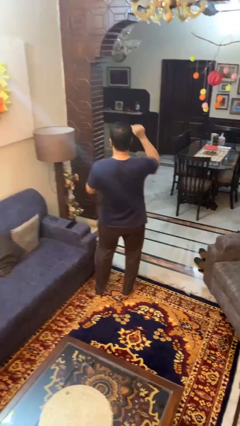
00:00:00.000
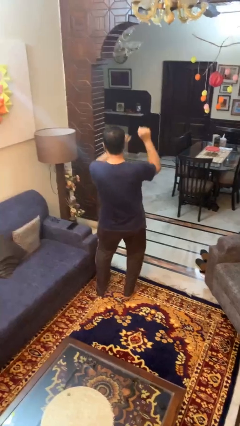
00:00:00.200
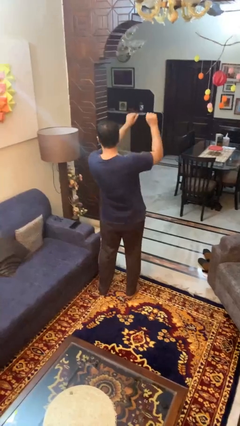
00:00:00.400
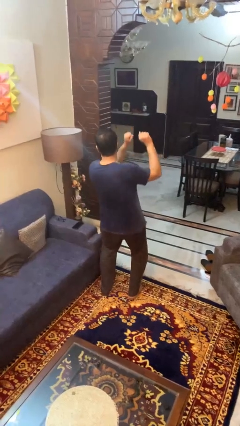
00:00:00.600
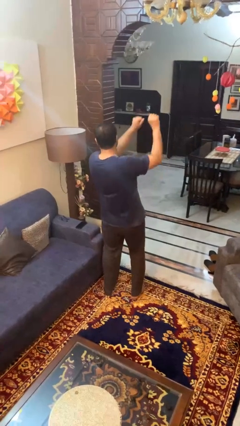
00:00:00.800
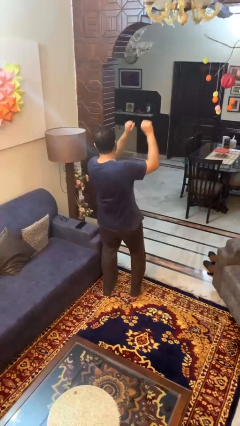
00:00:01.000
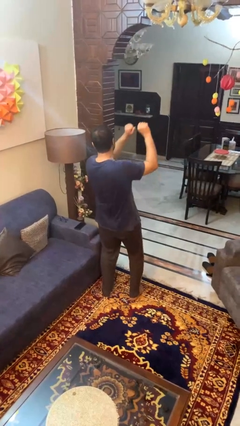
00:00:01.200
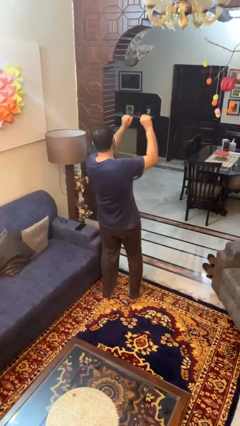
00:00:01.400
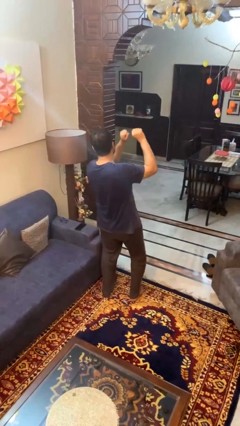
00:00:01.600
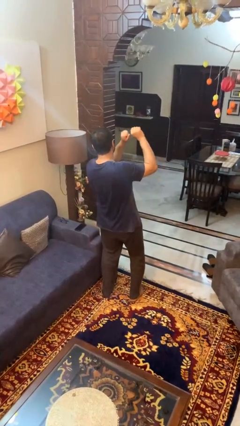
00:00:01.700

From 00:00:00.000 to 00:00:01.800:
person dances in place

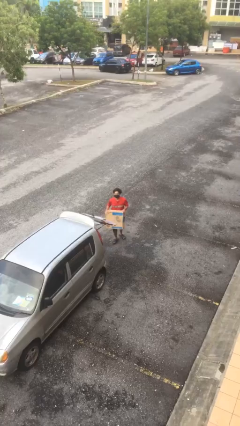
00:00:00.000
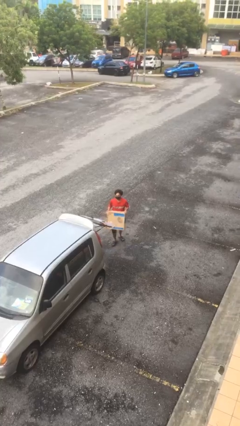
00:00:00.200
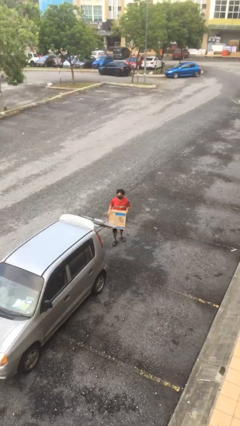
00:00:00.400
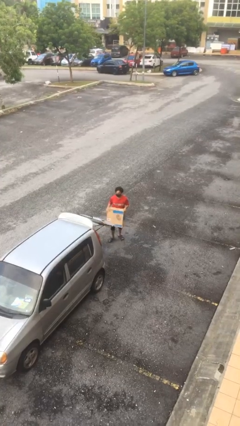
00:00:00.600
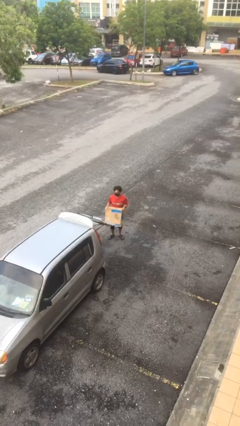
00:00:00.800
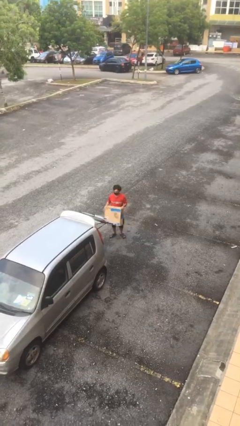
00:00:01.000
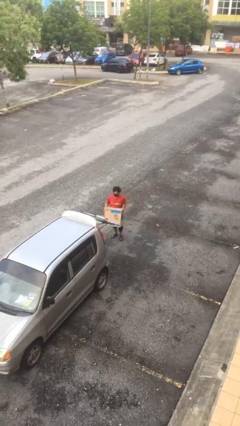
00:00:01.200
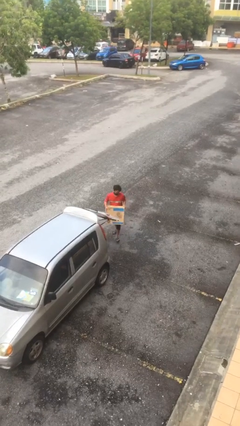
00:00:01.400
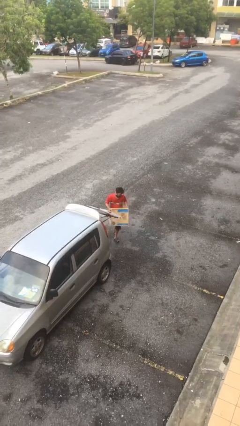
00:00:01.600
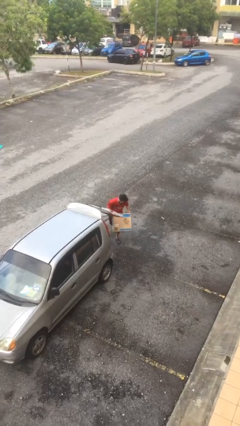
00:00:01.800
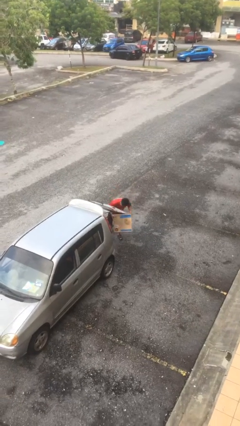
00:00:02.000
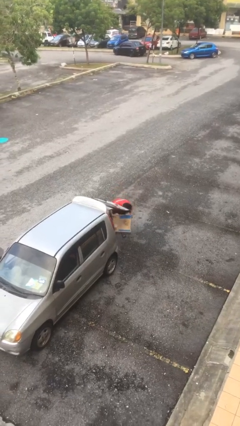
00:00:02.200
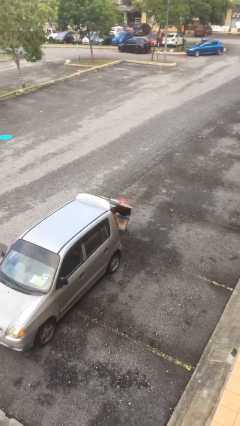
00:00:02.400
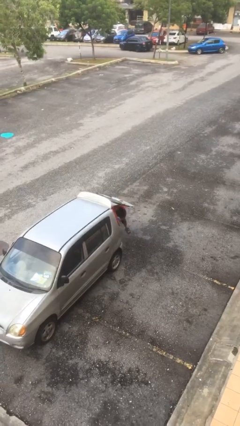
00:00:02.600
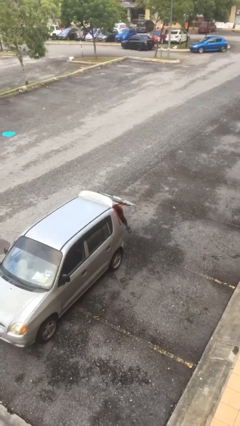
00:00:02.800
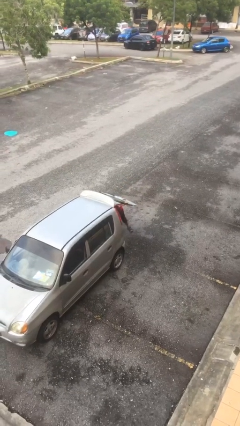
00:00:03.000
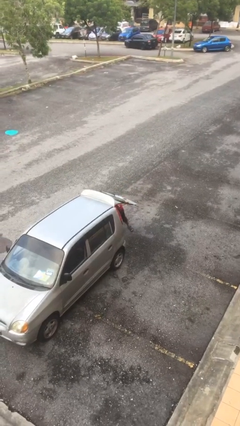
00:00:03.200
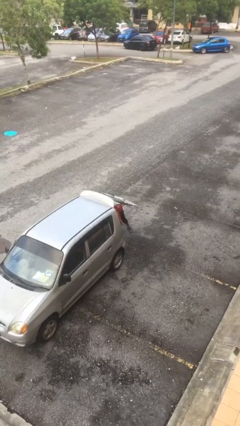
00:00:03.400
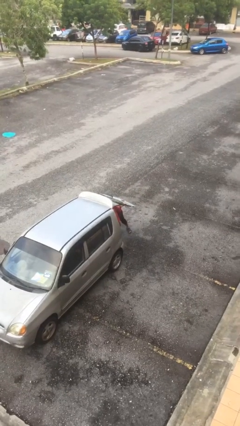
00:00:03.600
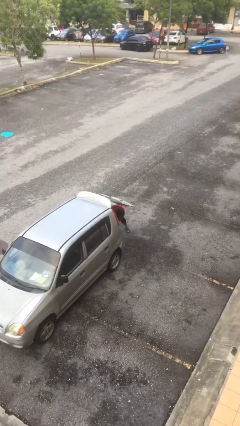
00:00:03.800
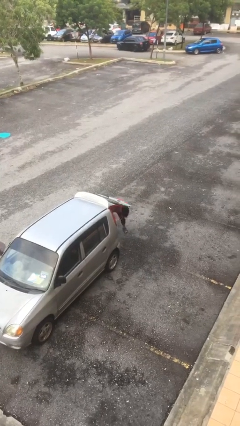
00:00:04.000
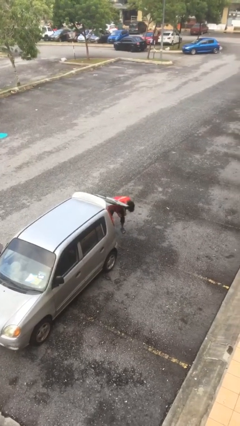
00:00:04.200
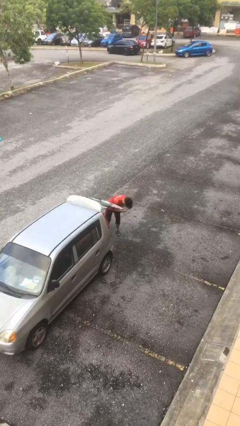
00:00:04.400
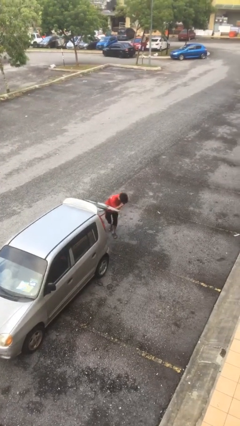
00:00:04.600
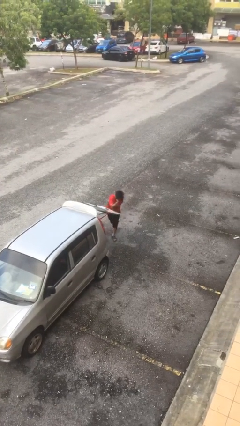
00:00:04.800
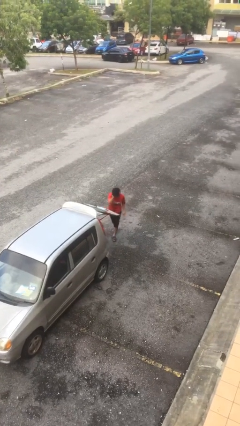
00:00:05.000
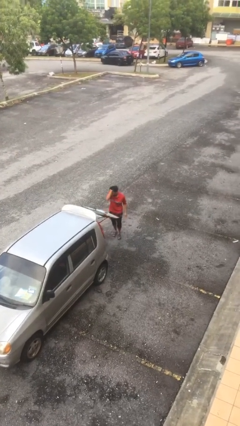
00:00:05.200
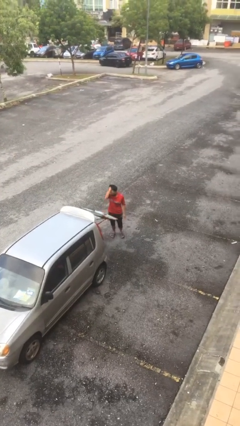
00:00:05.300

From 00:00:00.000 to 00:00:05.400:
person loads car

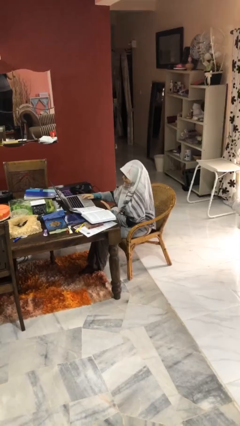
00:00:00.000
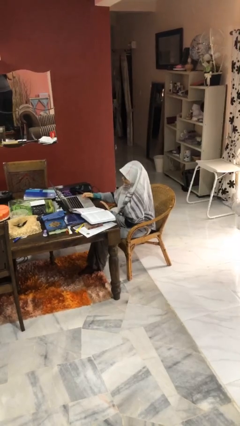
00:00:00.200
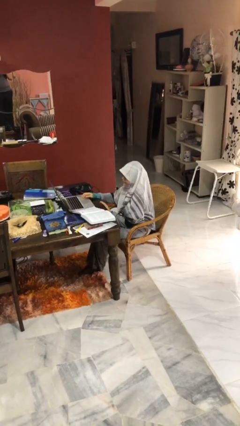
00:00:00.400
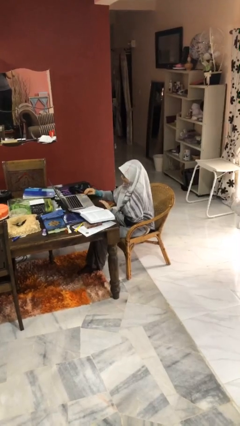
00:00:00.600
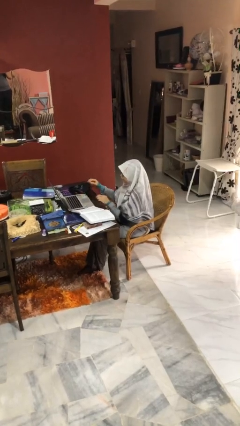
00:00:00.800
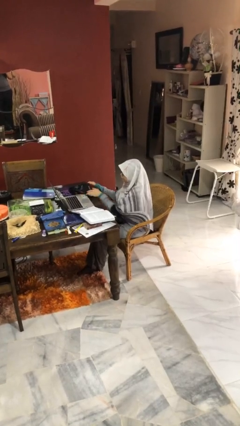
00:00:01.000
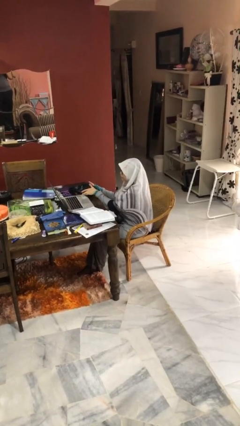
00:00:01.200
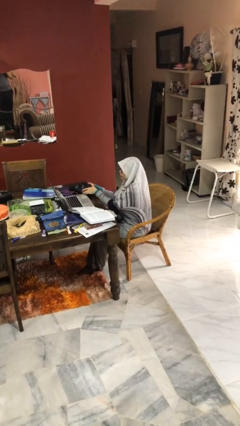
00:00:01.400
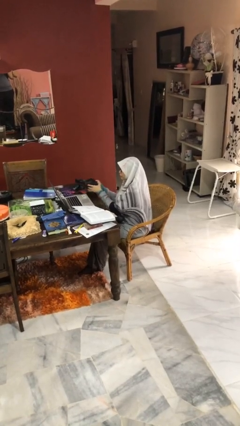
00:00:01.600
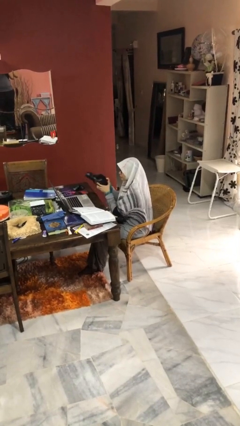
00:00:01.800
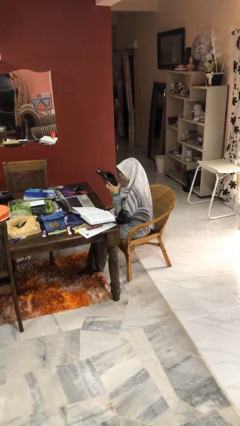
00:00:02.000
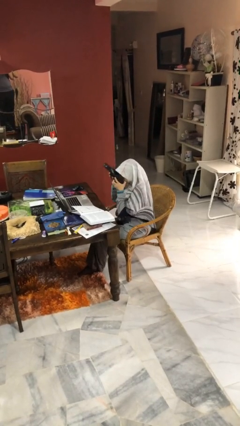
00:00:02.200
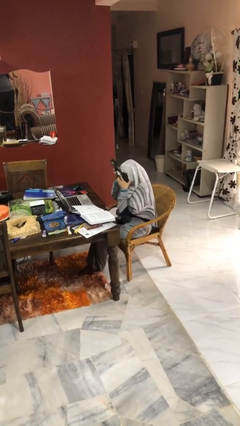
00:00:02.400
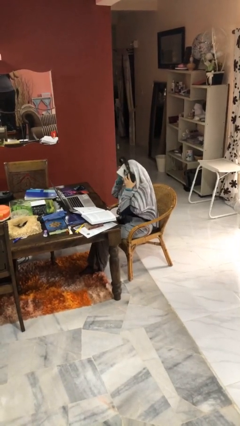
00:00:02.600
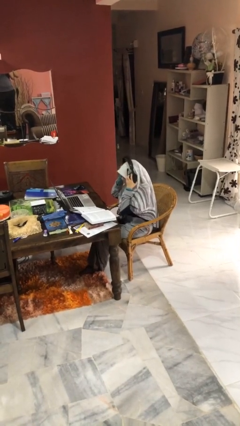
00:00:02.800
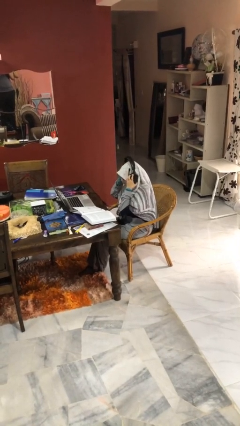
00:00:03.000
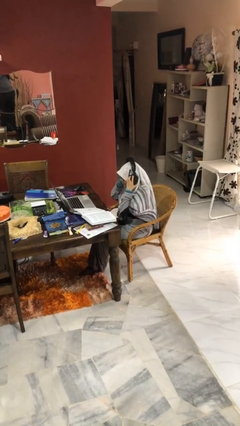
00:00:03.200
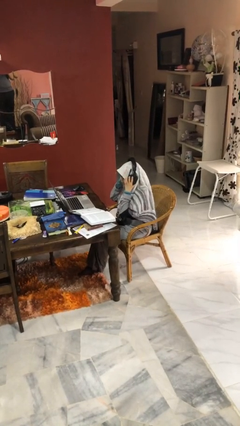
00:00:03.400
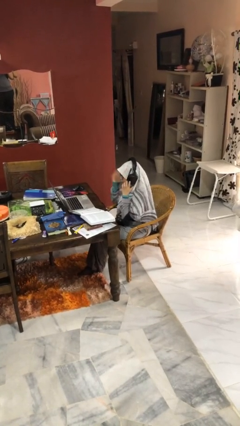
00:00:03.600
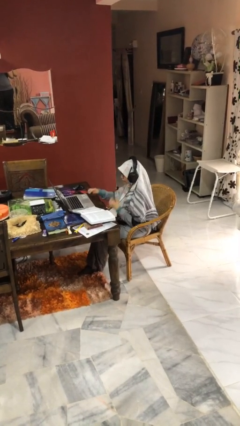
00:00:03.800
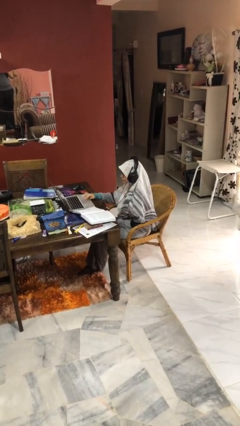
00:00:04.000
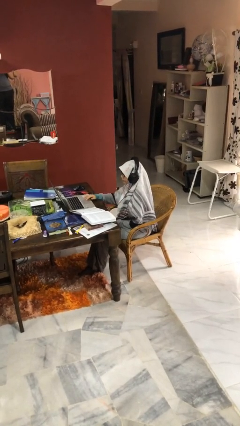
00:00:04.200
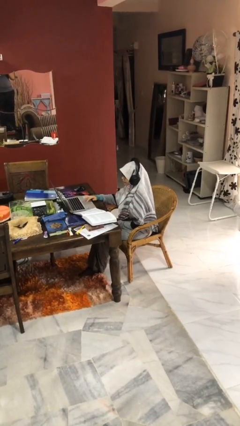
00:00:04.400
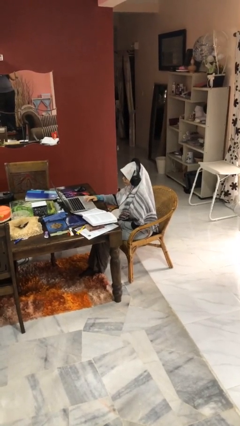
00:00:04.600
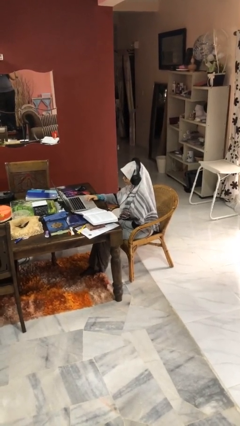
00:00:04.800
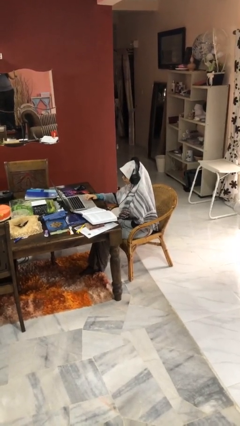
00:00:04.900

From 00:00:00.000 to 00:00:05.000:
person puts on headphones

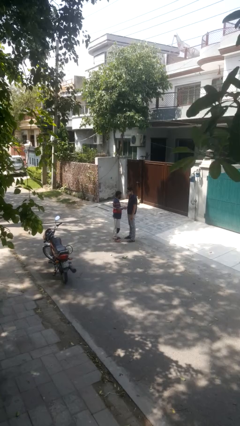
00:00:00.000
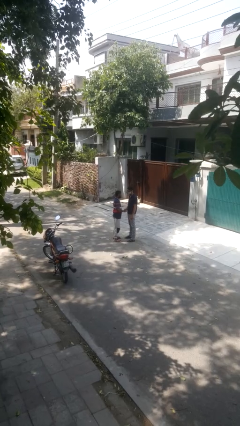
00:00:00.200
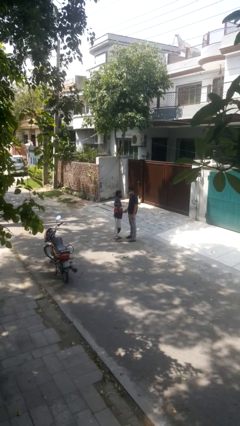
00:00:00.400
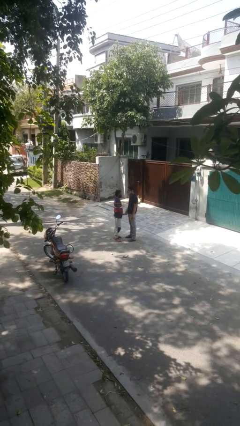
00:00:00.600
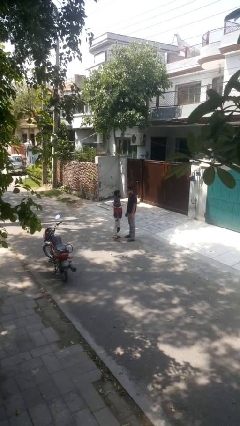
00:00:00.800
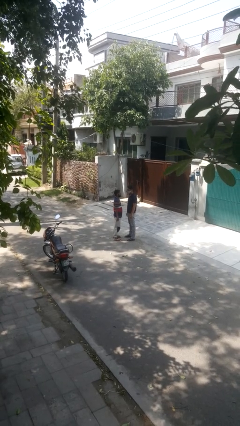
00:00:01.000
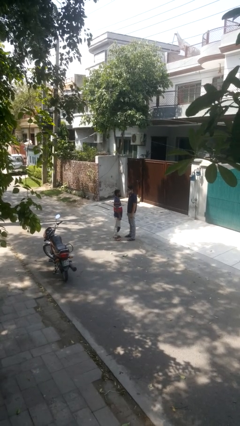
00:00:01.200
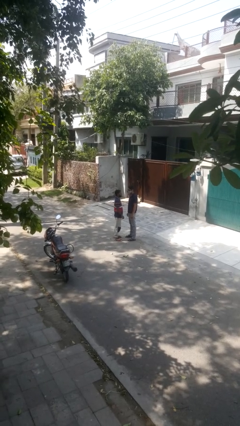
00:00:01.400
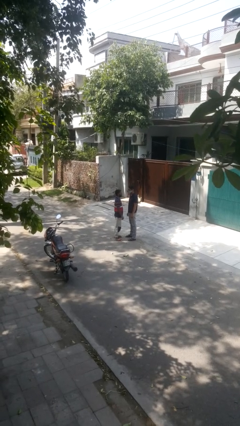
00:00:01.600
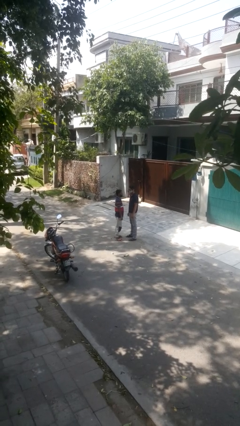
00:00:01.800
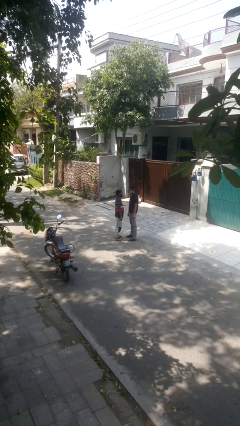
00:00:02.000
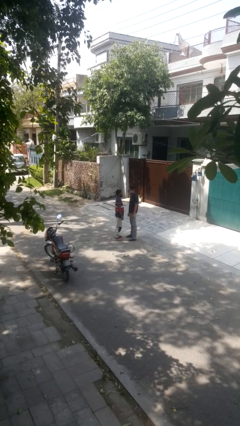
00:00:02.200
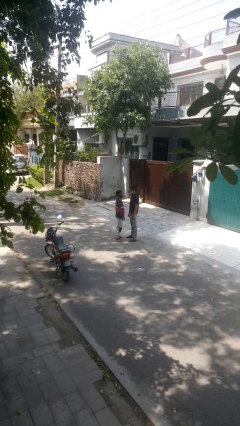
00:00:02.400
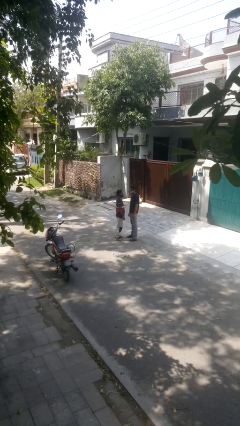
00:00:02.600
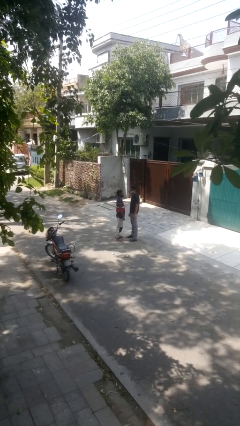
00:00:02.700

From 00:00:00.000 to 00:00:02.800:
person highfives hand

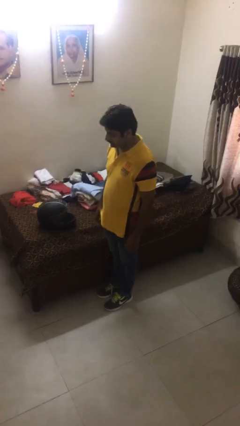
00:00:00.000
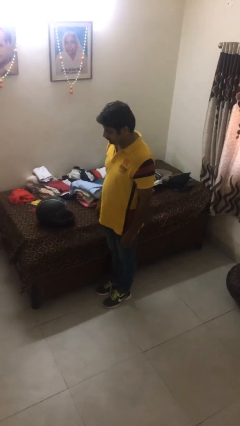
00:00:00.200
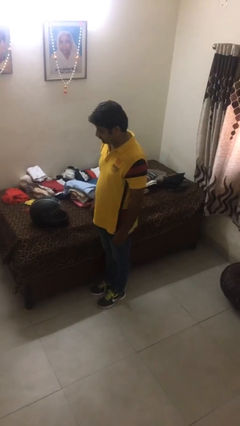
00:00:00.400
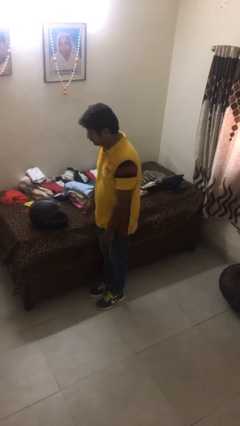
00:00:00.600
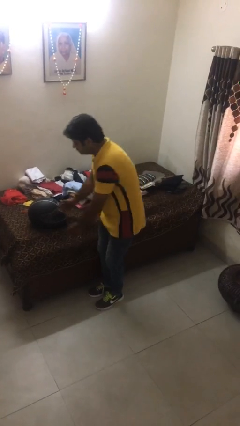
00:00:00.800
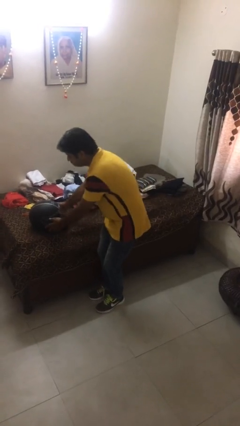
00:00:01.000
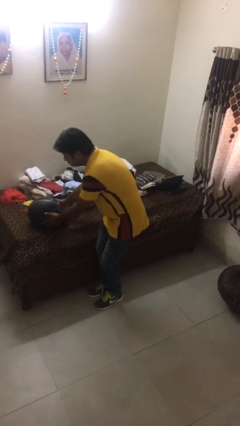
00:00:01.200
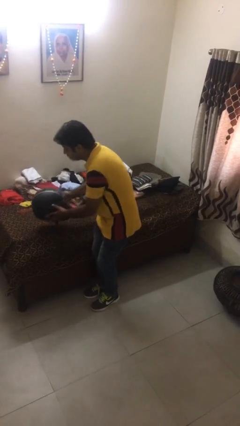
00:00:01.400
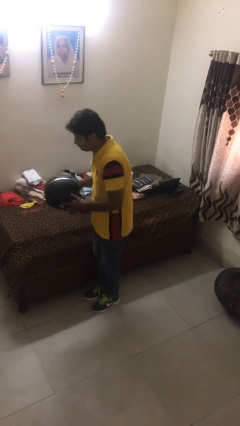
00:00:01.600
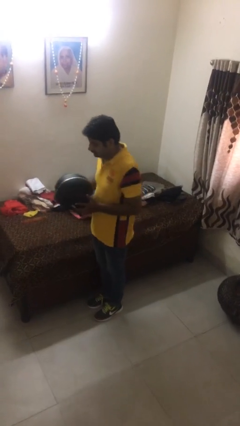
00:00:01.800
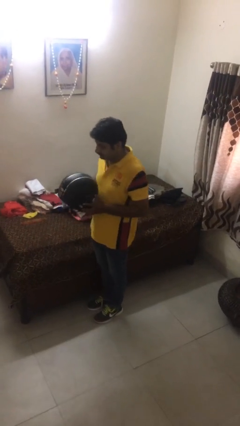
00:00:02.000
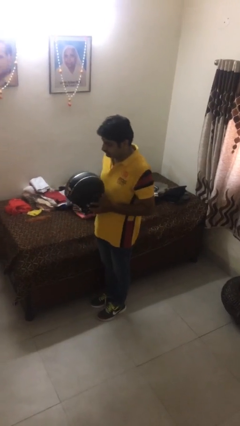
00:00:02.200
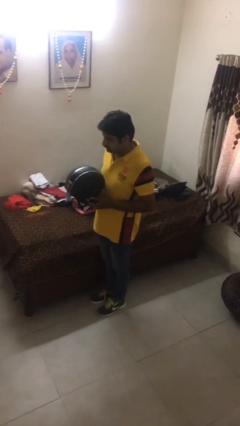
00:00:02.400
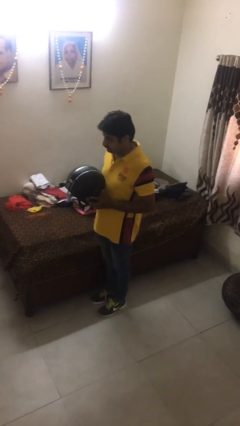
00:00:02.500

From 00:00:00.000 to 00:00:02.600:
person picks up object from bed

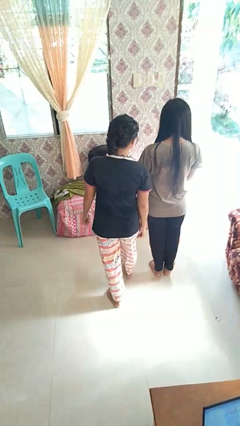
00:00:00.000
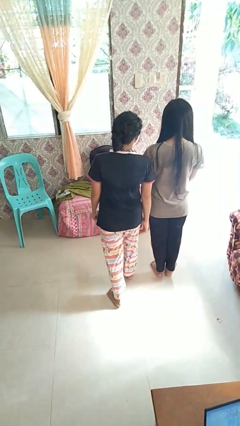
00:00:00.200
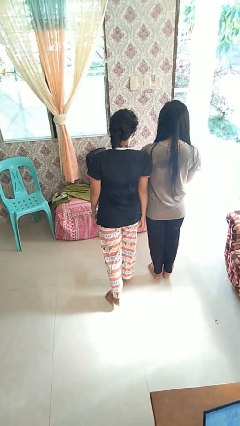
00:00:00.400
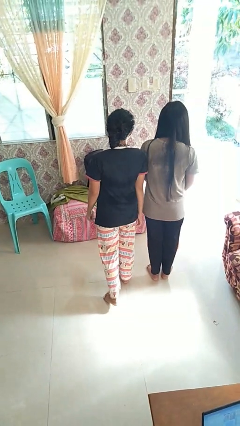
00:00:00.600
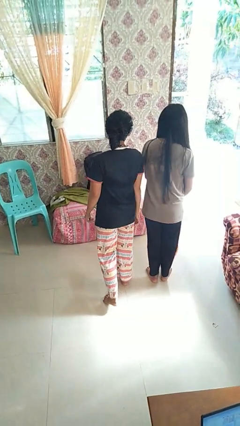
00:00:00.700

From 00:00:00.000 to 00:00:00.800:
person bumps into person
